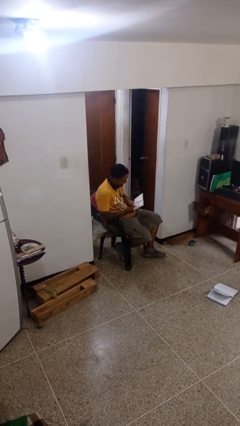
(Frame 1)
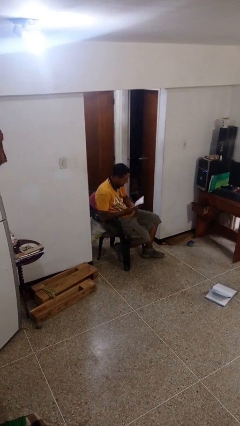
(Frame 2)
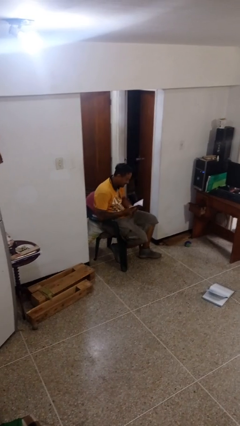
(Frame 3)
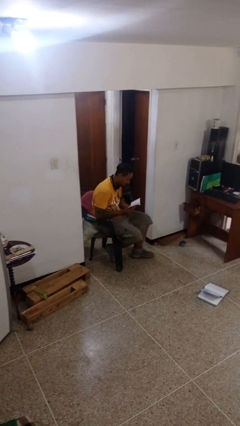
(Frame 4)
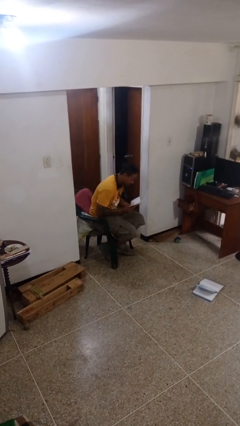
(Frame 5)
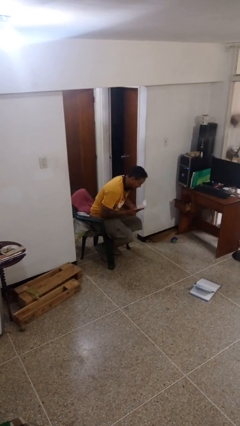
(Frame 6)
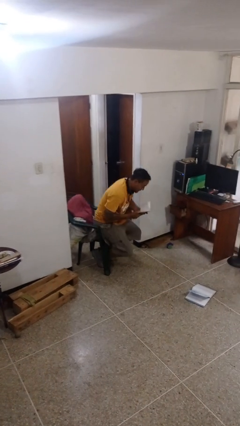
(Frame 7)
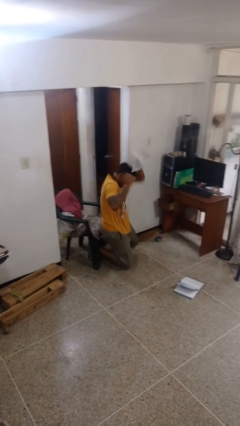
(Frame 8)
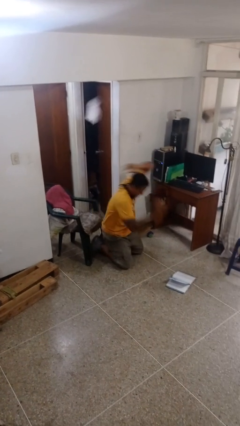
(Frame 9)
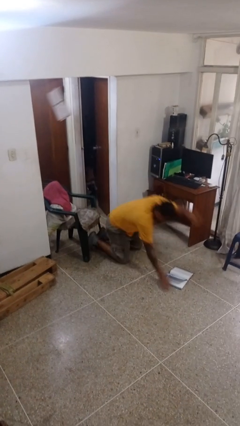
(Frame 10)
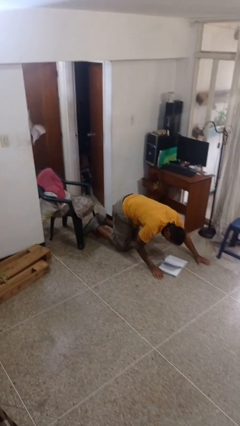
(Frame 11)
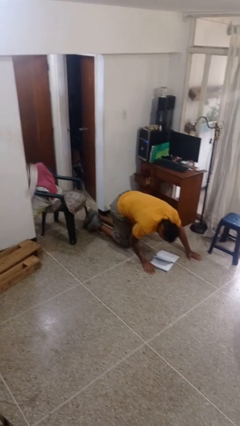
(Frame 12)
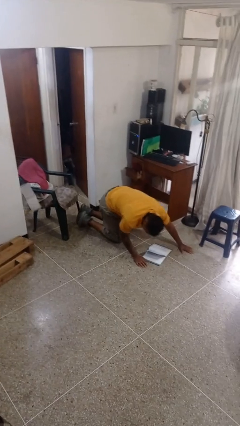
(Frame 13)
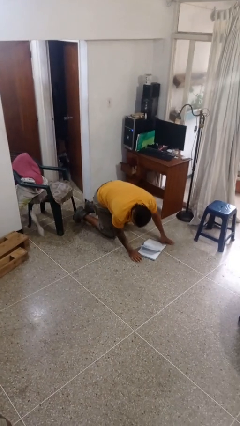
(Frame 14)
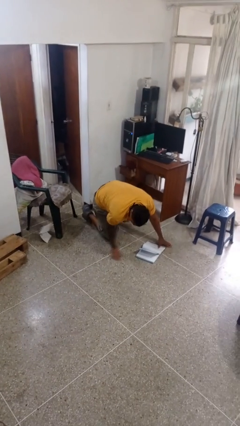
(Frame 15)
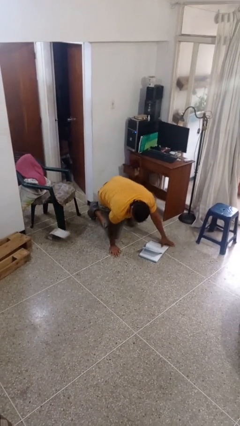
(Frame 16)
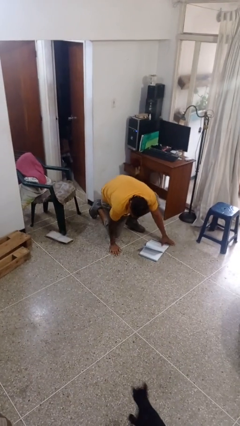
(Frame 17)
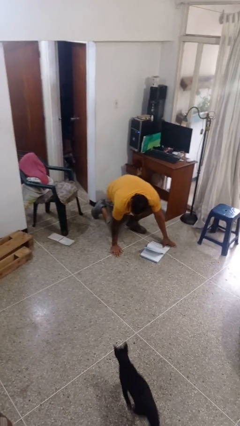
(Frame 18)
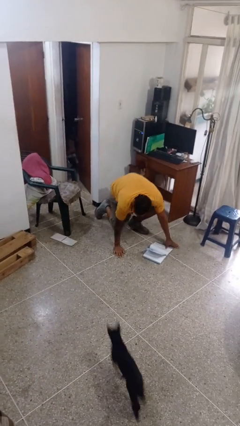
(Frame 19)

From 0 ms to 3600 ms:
person falls from chair

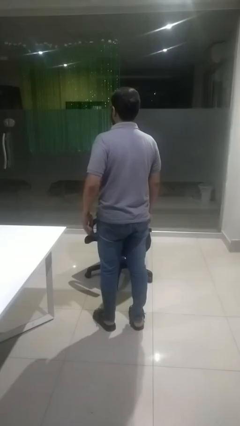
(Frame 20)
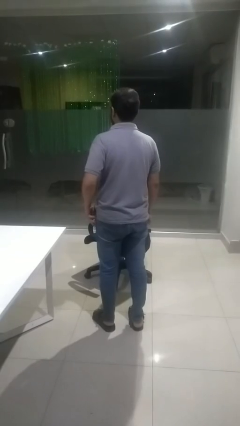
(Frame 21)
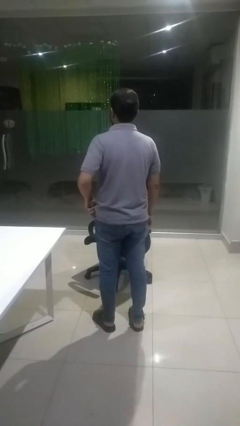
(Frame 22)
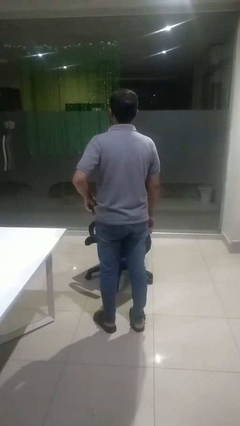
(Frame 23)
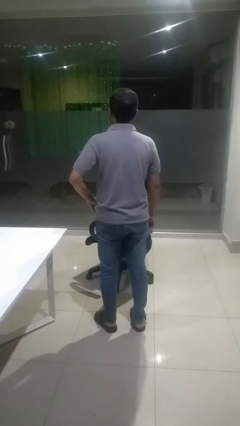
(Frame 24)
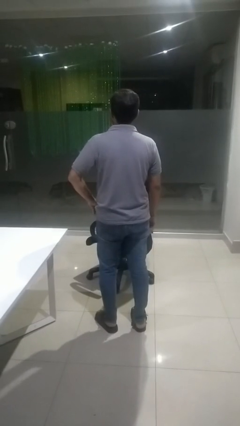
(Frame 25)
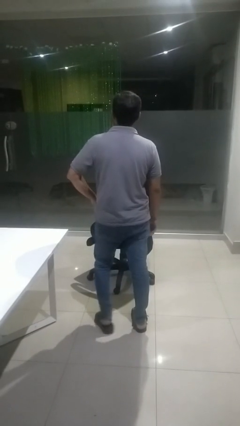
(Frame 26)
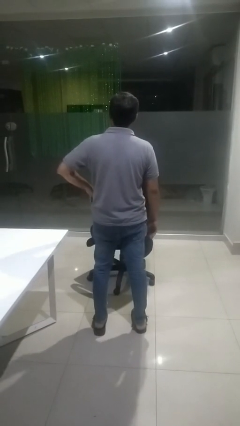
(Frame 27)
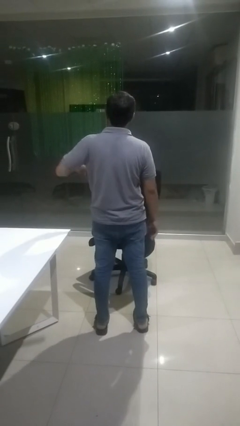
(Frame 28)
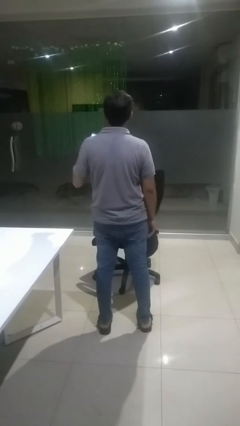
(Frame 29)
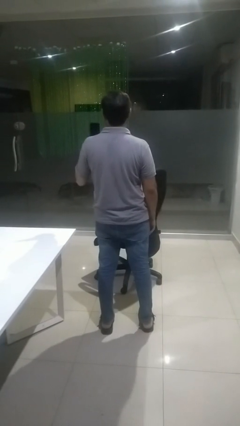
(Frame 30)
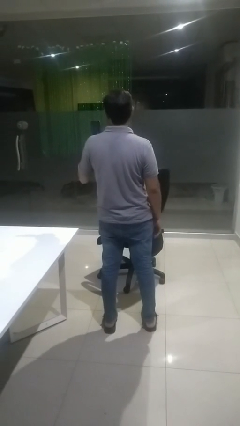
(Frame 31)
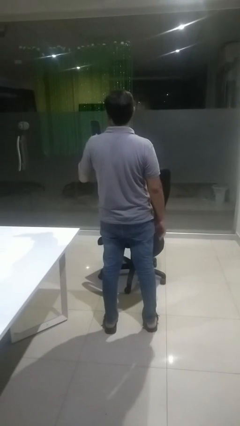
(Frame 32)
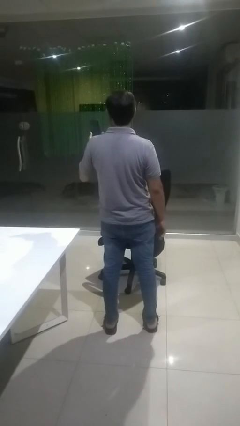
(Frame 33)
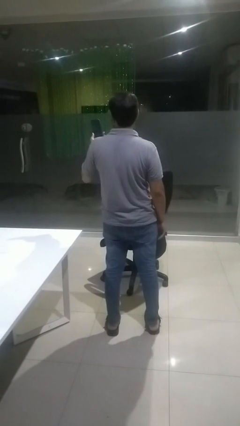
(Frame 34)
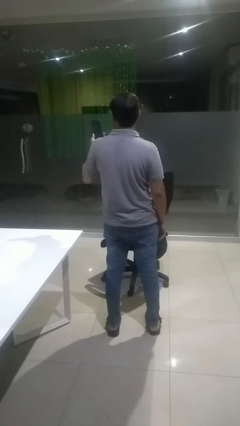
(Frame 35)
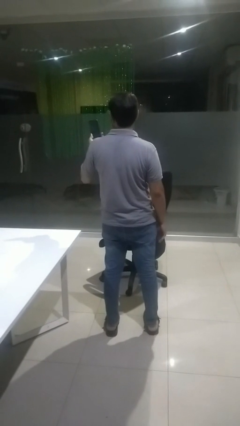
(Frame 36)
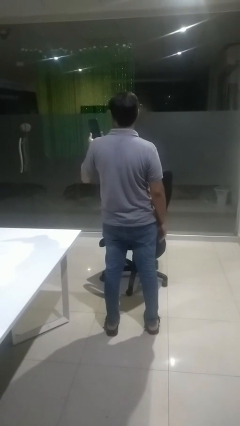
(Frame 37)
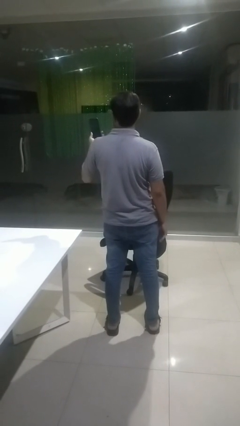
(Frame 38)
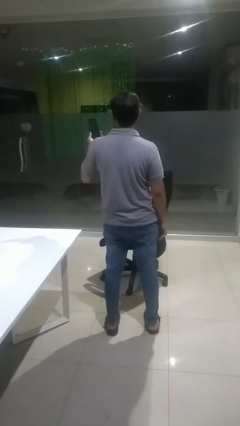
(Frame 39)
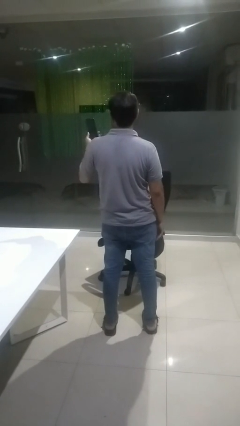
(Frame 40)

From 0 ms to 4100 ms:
person takes phone from pocket

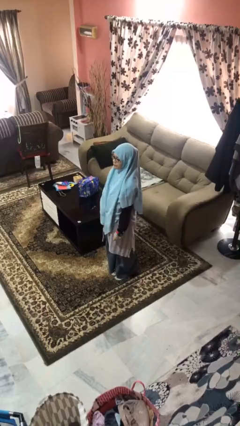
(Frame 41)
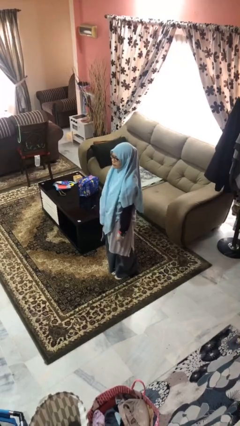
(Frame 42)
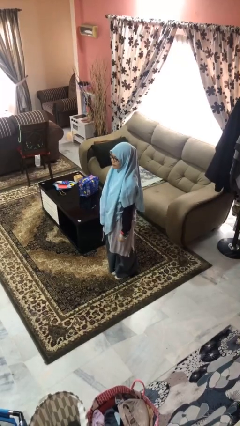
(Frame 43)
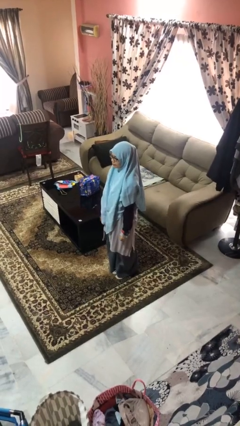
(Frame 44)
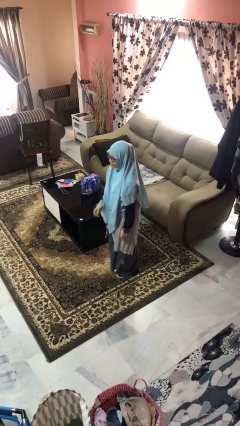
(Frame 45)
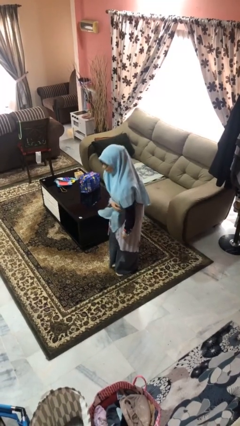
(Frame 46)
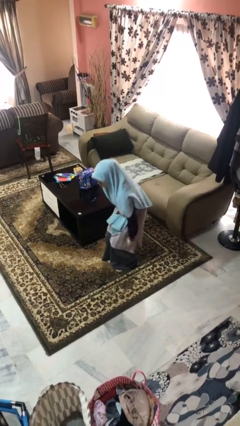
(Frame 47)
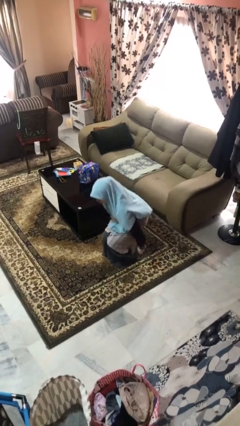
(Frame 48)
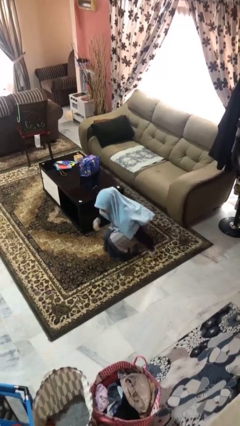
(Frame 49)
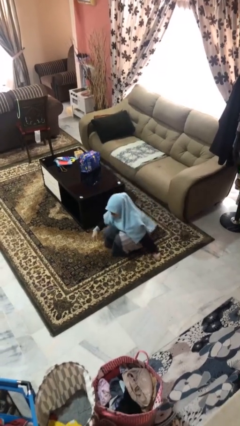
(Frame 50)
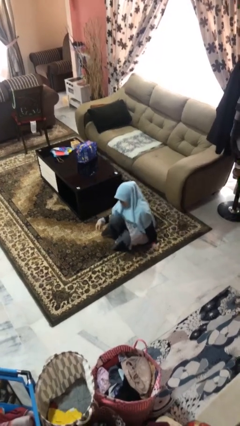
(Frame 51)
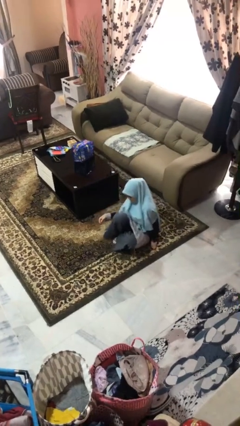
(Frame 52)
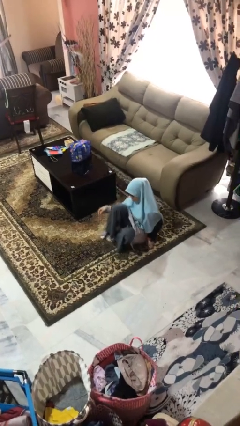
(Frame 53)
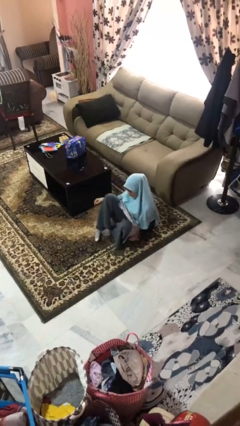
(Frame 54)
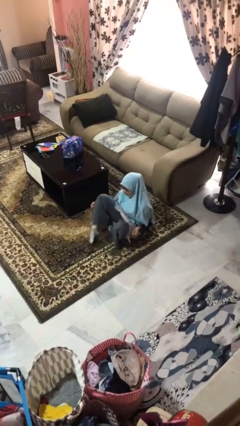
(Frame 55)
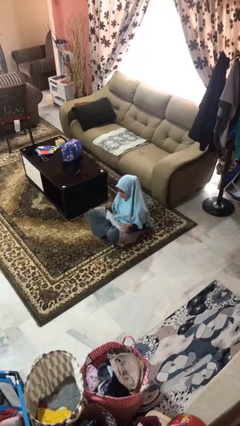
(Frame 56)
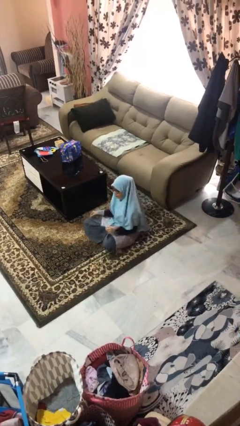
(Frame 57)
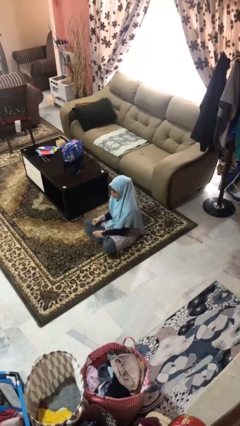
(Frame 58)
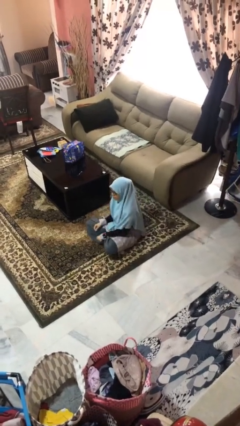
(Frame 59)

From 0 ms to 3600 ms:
person sits crisscross

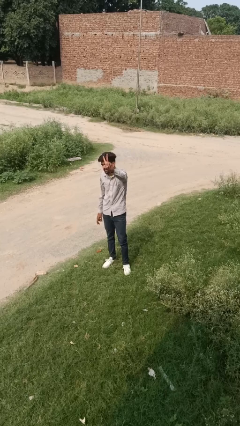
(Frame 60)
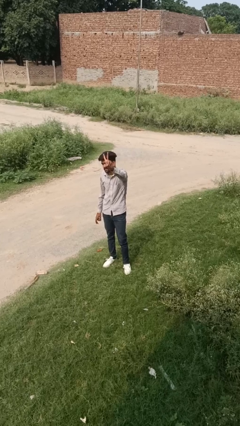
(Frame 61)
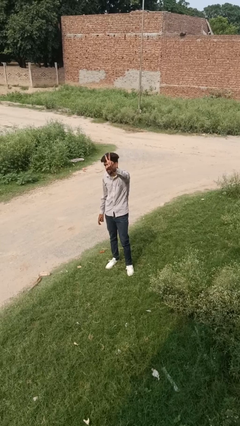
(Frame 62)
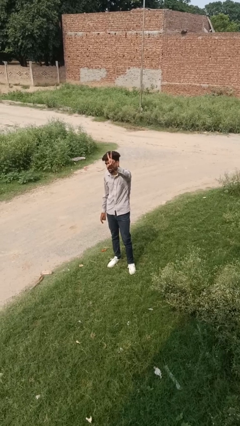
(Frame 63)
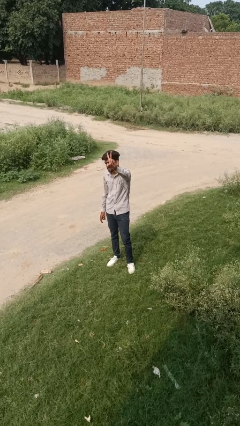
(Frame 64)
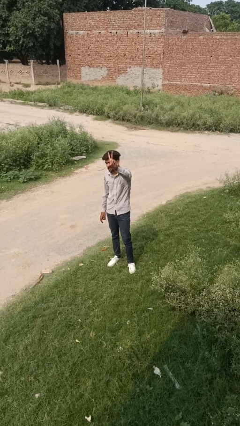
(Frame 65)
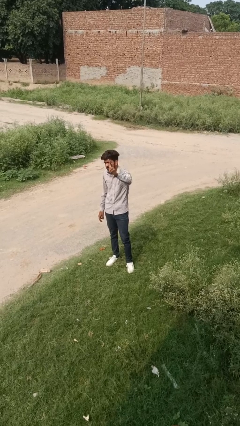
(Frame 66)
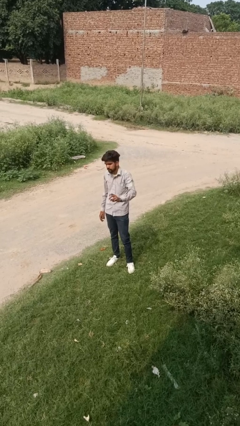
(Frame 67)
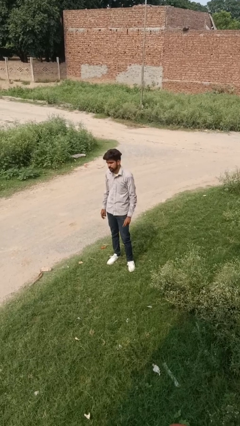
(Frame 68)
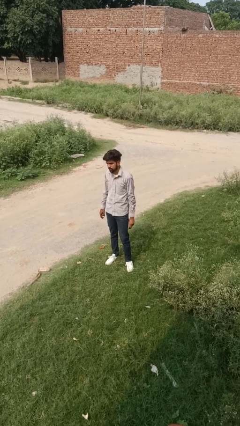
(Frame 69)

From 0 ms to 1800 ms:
person gestures peace

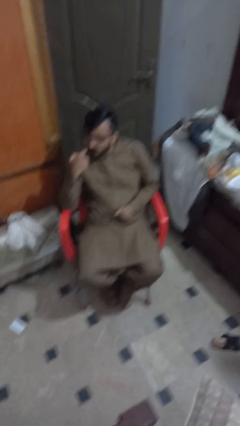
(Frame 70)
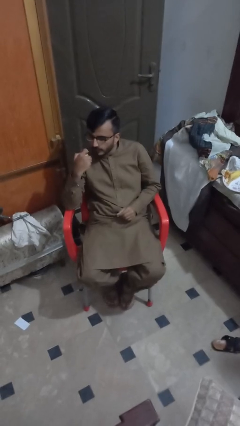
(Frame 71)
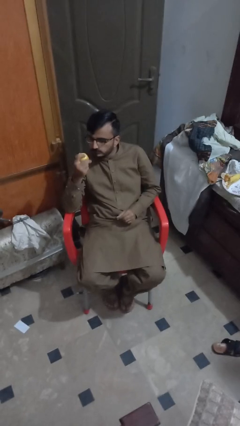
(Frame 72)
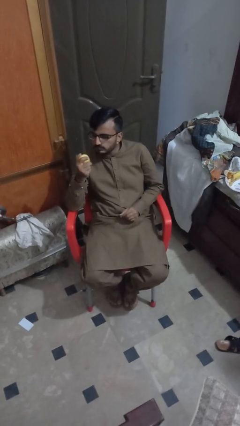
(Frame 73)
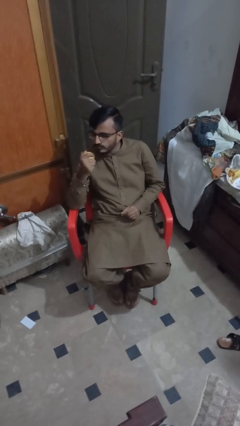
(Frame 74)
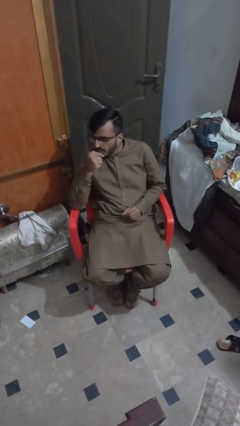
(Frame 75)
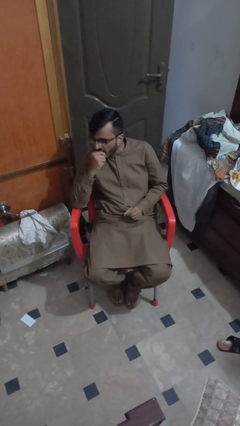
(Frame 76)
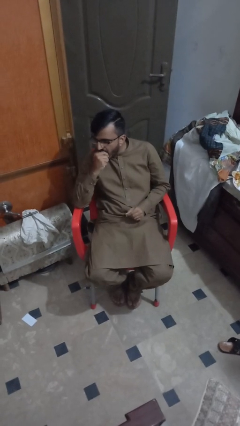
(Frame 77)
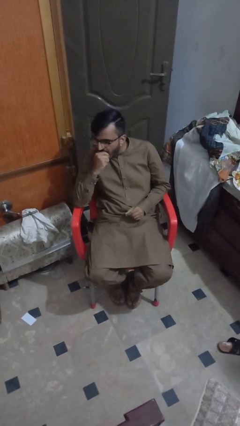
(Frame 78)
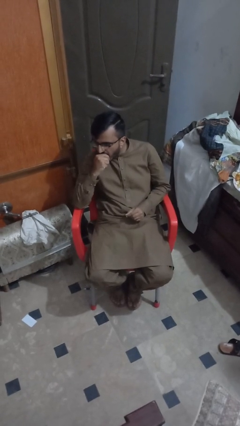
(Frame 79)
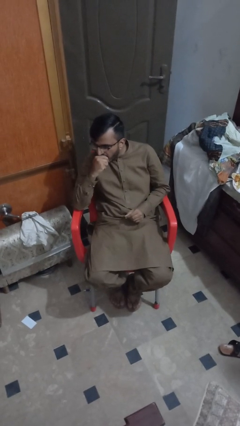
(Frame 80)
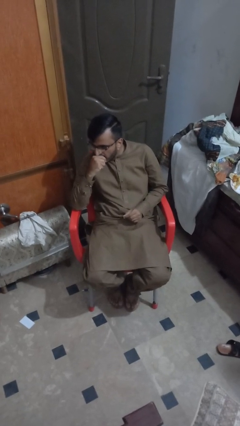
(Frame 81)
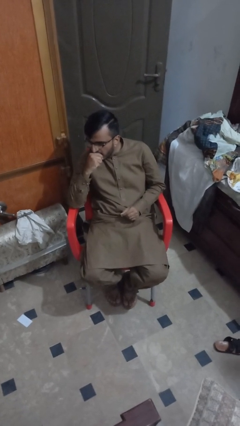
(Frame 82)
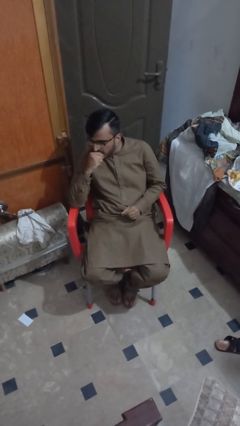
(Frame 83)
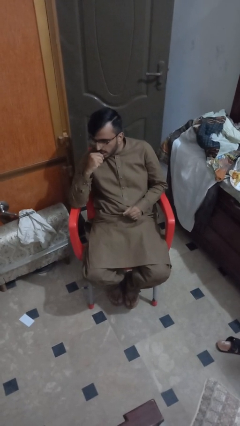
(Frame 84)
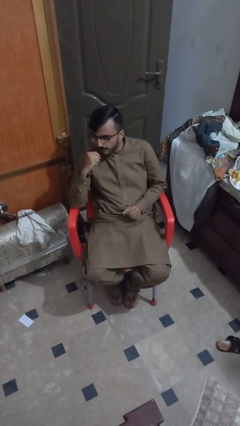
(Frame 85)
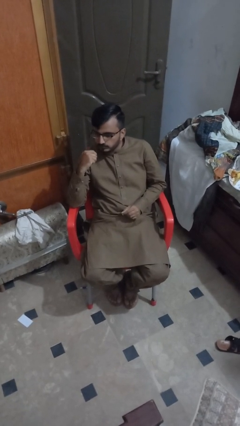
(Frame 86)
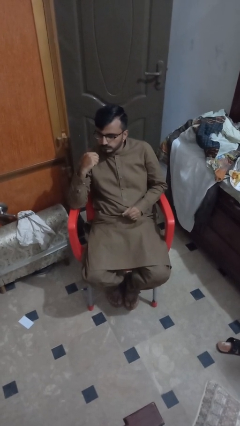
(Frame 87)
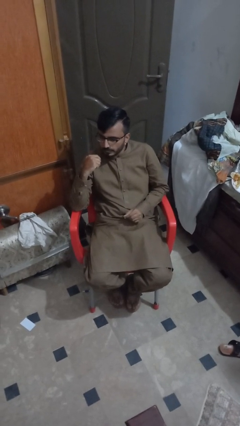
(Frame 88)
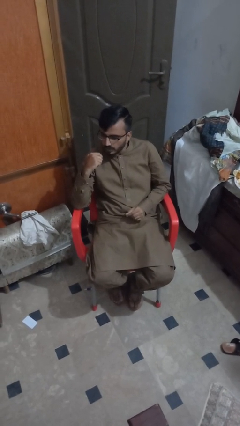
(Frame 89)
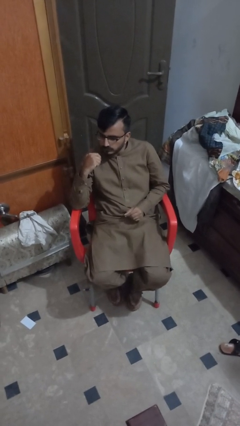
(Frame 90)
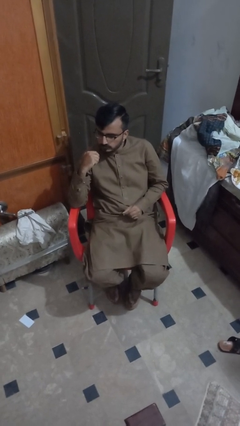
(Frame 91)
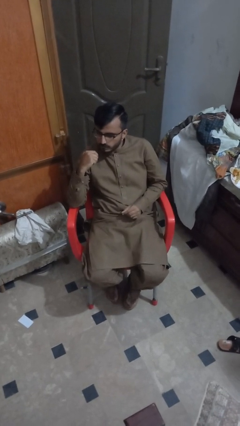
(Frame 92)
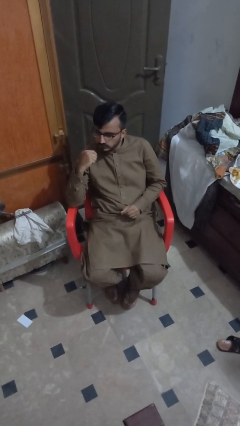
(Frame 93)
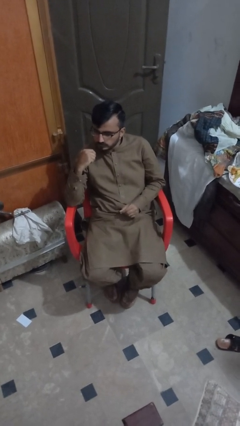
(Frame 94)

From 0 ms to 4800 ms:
person eats apple

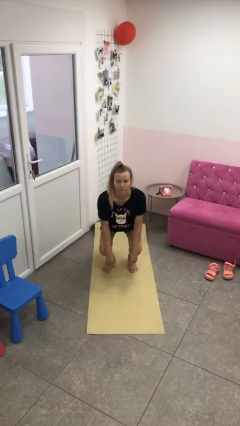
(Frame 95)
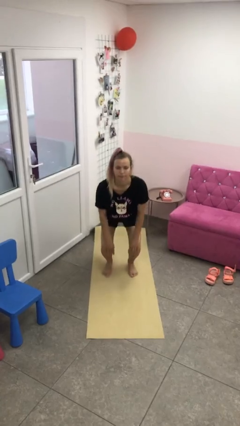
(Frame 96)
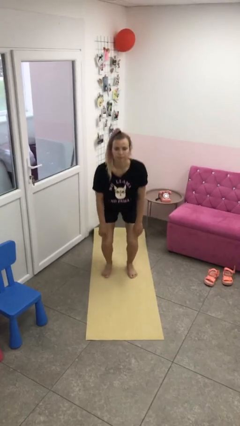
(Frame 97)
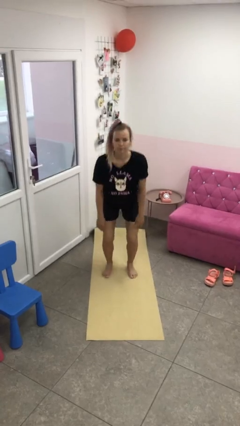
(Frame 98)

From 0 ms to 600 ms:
person stands up
